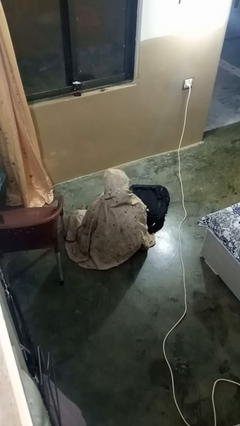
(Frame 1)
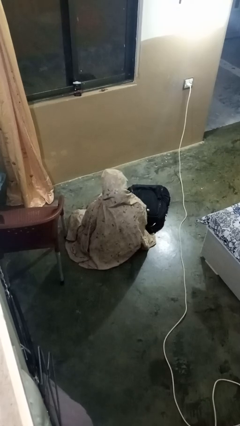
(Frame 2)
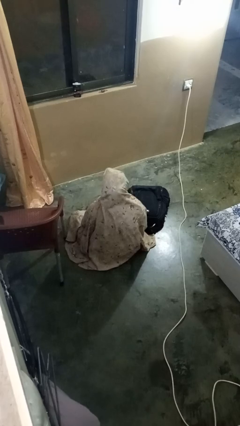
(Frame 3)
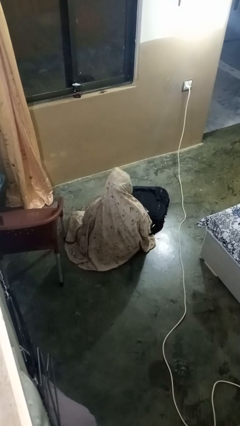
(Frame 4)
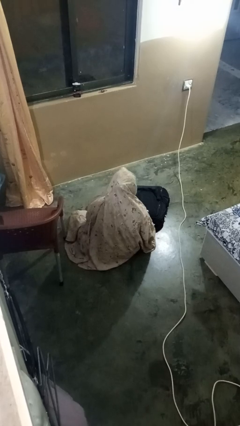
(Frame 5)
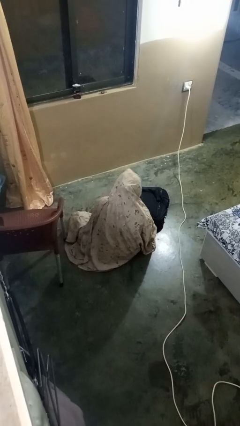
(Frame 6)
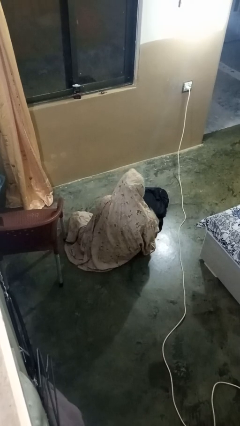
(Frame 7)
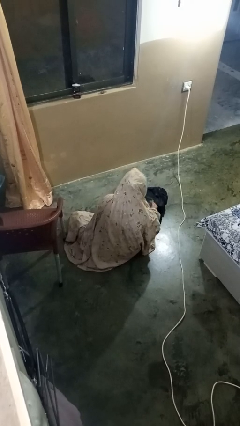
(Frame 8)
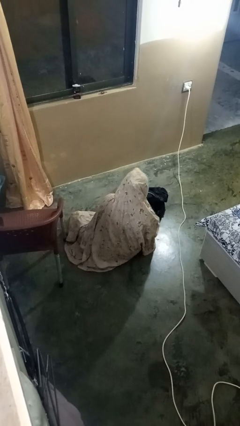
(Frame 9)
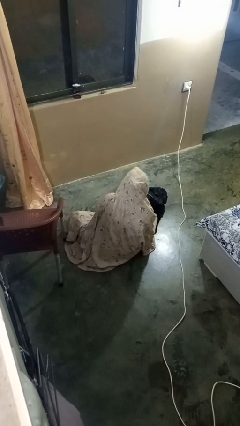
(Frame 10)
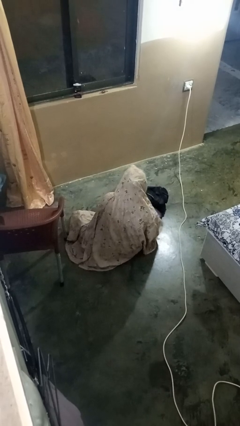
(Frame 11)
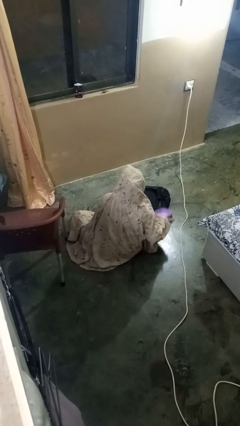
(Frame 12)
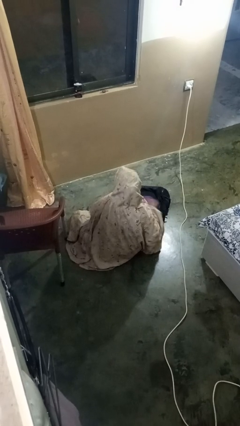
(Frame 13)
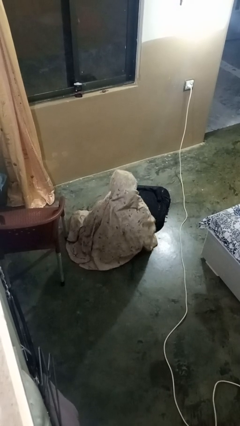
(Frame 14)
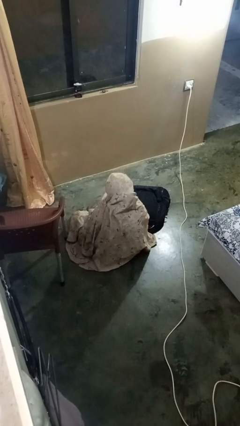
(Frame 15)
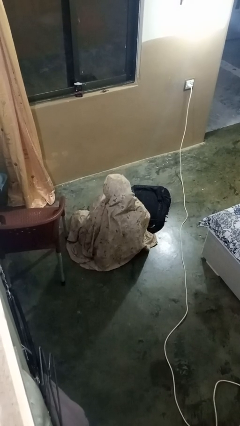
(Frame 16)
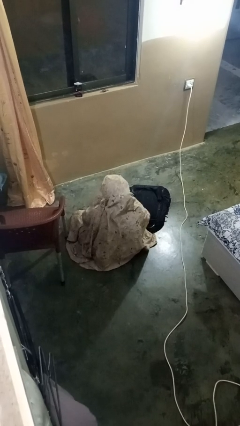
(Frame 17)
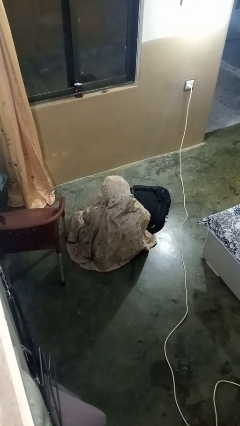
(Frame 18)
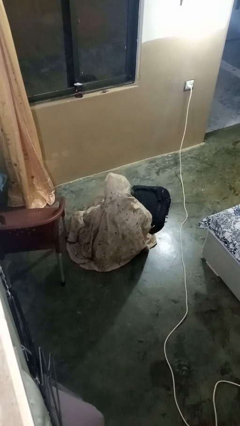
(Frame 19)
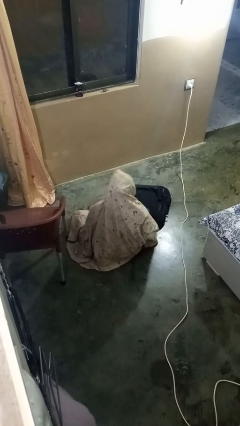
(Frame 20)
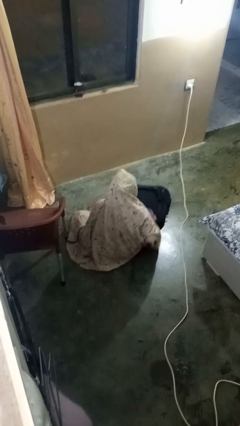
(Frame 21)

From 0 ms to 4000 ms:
person eats snack from bag

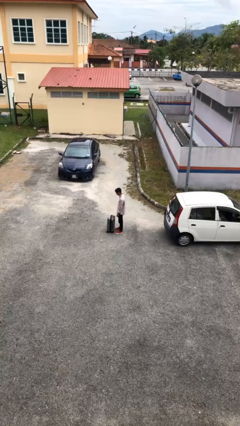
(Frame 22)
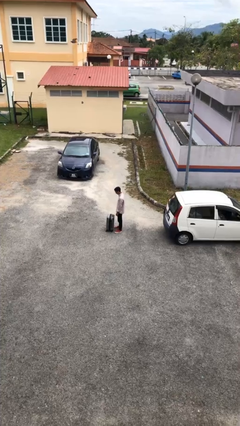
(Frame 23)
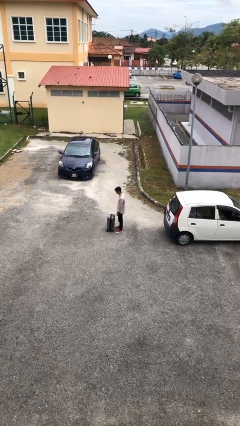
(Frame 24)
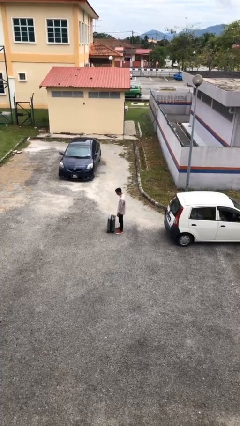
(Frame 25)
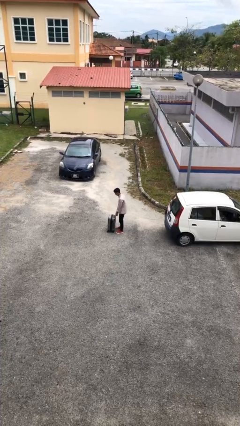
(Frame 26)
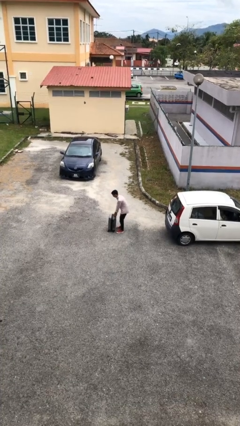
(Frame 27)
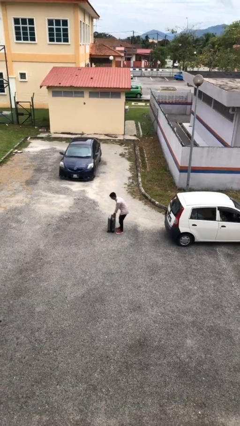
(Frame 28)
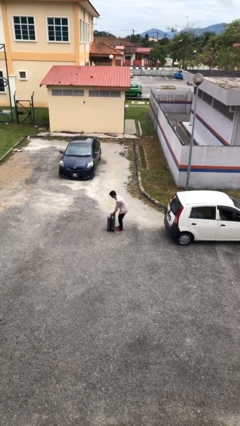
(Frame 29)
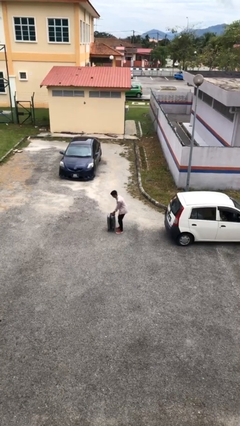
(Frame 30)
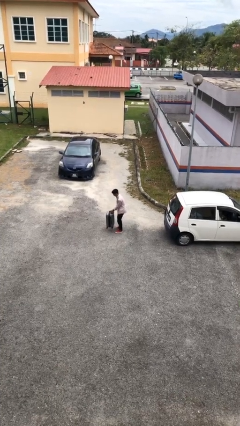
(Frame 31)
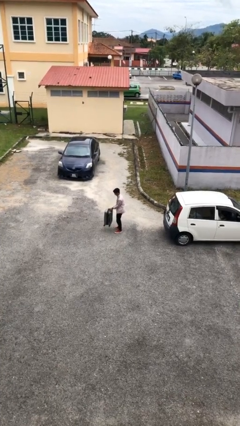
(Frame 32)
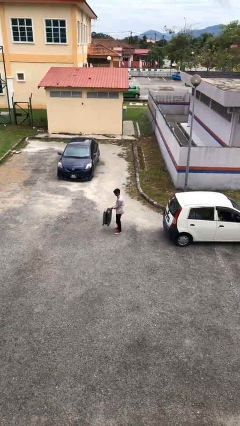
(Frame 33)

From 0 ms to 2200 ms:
person picks up object from floor

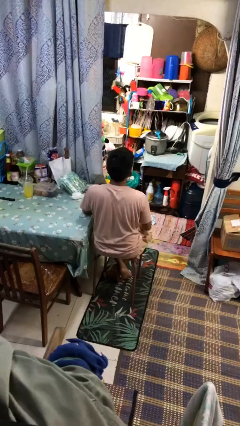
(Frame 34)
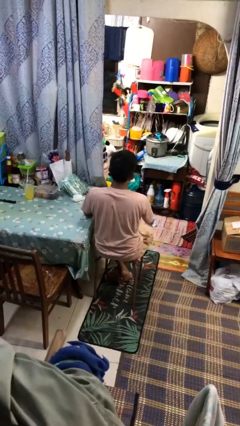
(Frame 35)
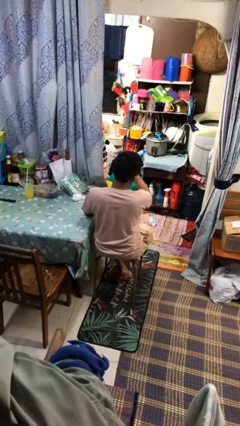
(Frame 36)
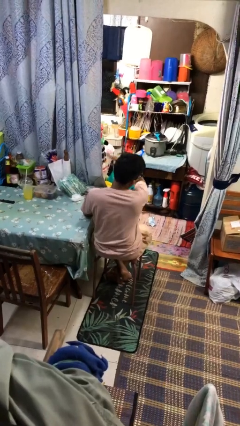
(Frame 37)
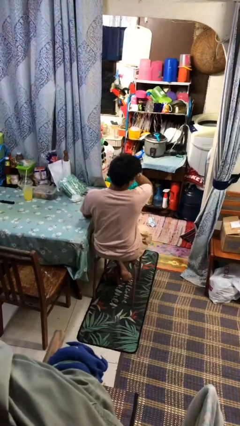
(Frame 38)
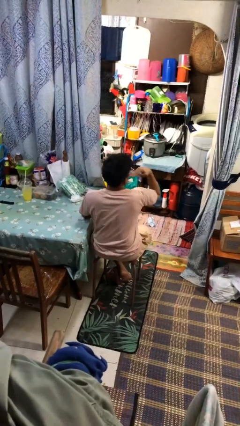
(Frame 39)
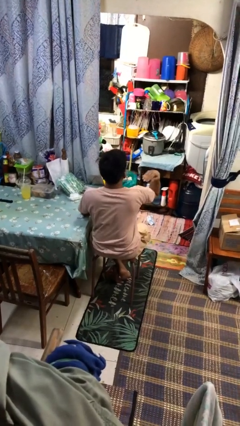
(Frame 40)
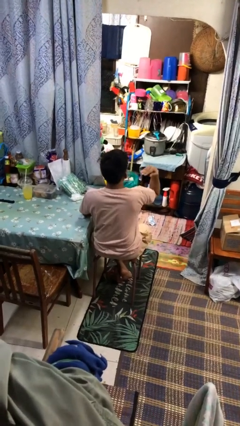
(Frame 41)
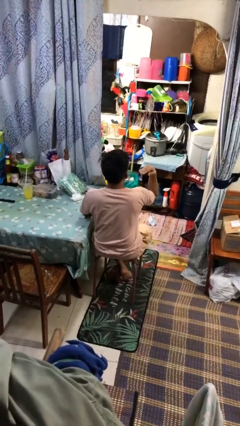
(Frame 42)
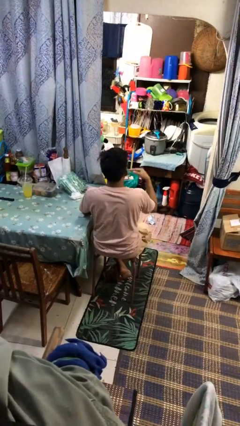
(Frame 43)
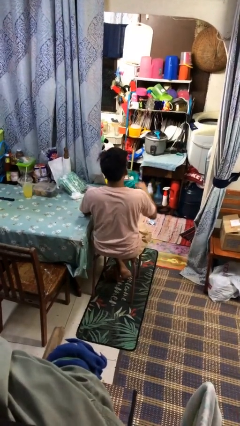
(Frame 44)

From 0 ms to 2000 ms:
person gestures cut

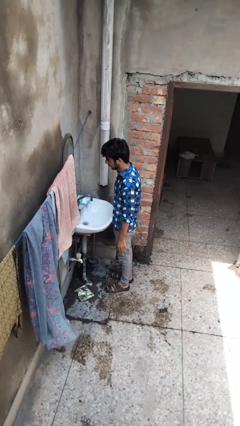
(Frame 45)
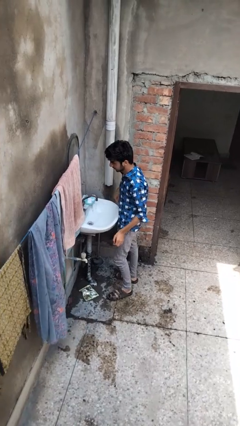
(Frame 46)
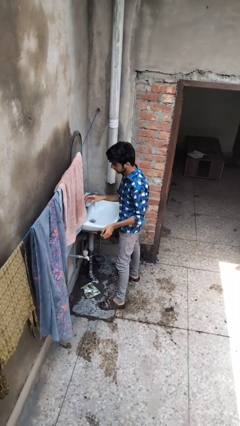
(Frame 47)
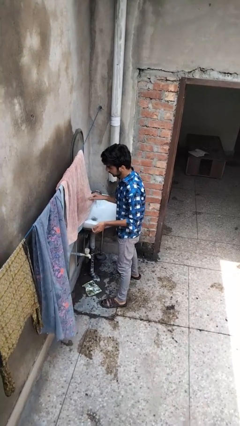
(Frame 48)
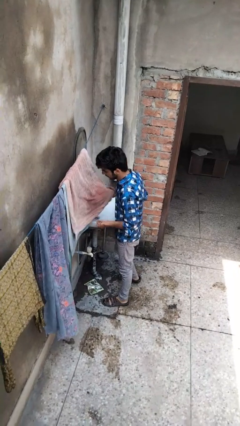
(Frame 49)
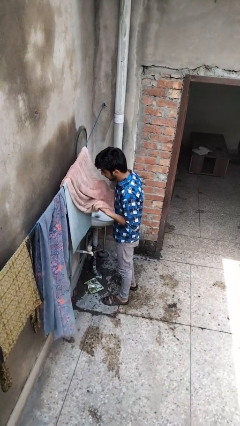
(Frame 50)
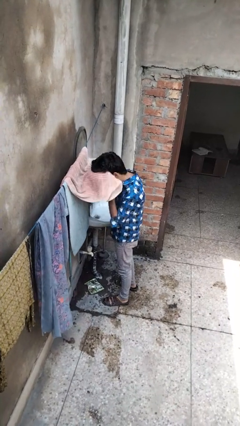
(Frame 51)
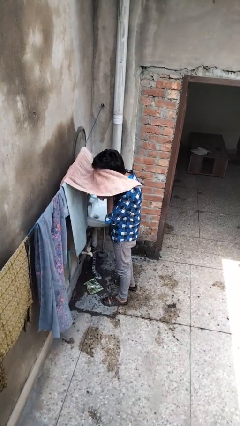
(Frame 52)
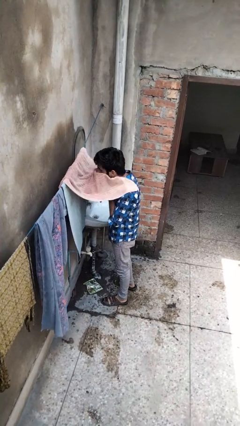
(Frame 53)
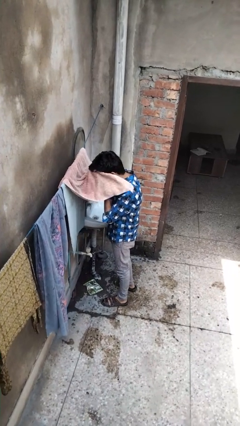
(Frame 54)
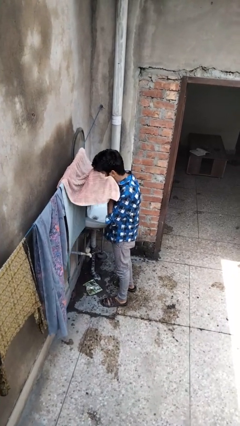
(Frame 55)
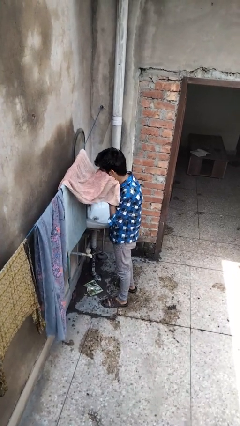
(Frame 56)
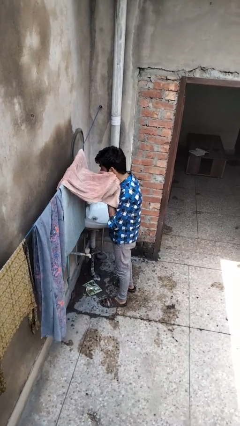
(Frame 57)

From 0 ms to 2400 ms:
person dries face with towel

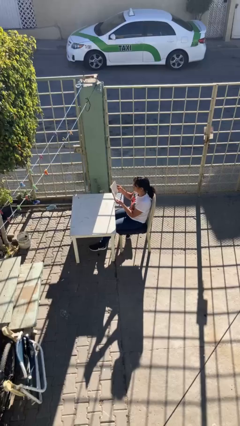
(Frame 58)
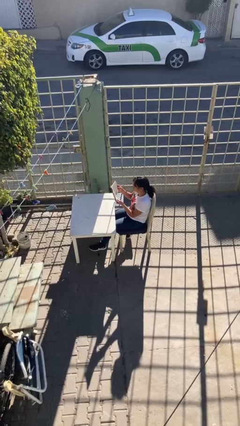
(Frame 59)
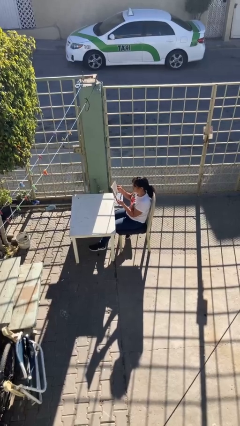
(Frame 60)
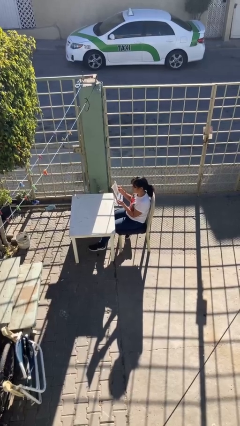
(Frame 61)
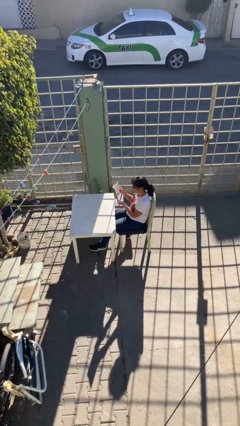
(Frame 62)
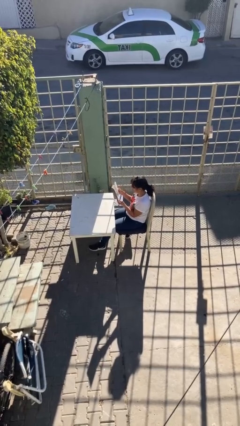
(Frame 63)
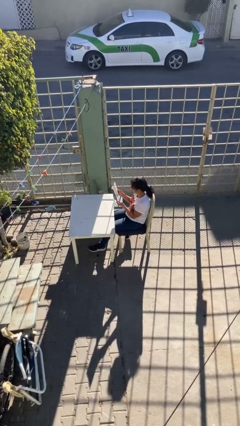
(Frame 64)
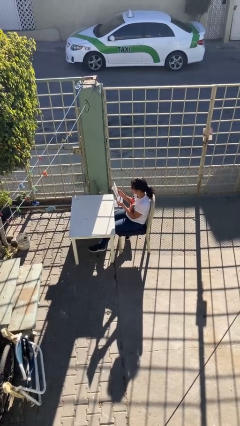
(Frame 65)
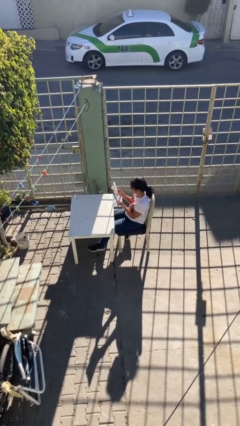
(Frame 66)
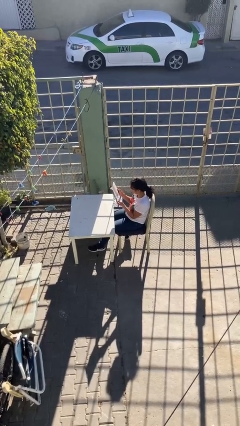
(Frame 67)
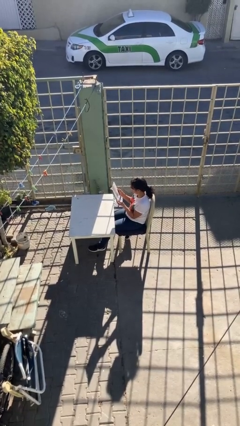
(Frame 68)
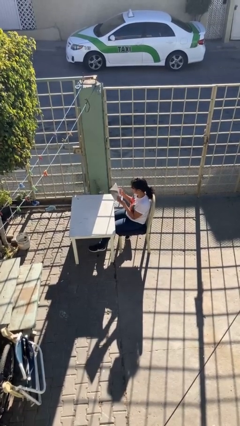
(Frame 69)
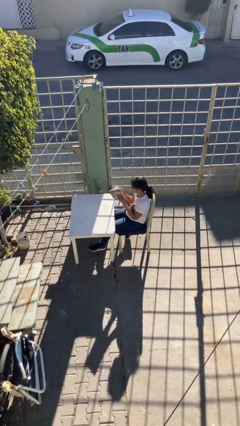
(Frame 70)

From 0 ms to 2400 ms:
person reads document

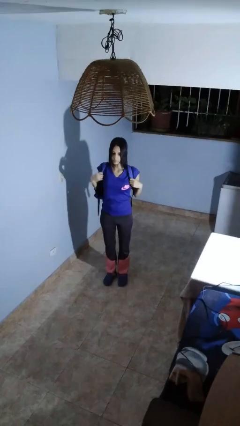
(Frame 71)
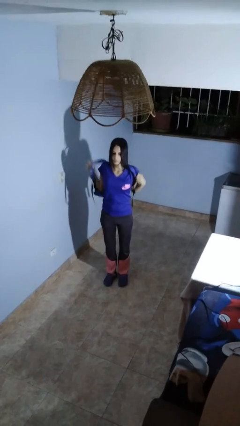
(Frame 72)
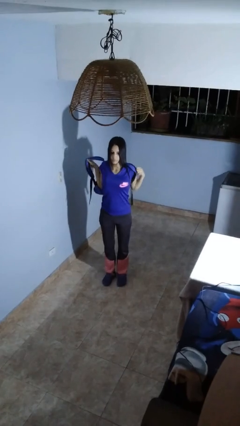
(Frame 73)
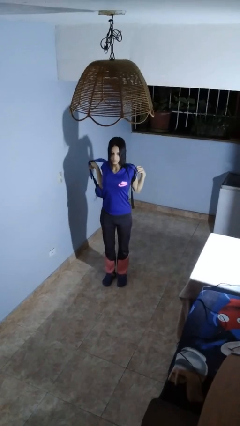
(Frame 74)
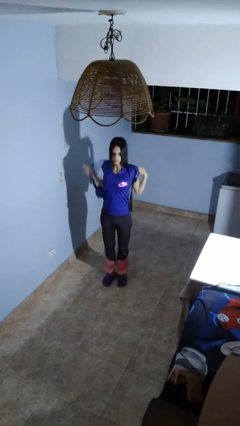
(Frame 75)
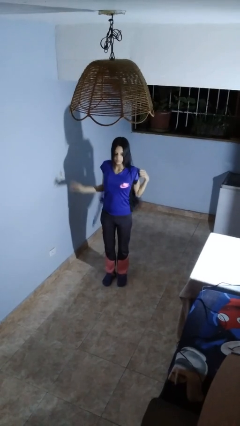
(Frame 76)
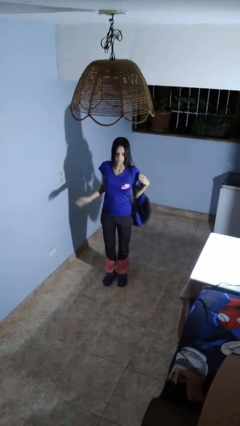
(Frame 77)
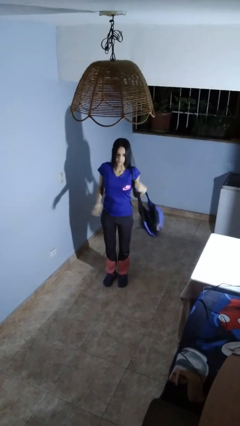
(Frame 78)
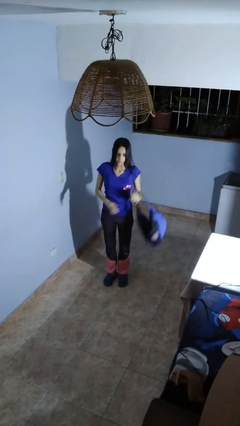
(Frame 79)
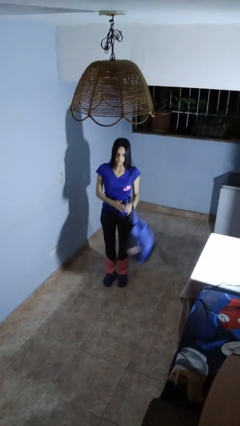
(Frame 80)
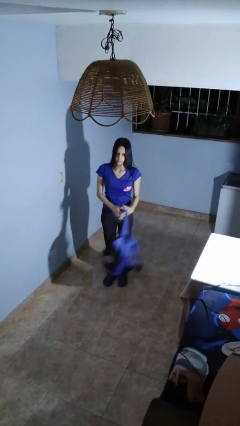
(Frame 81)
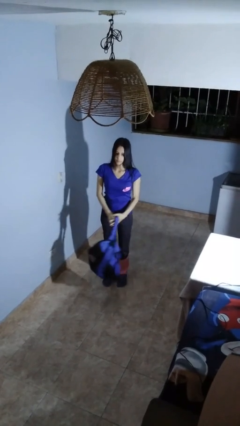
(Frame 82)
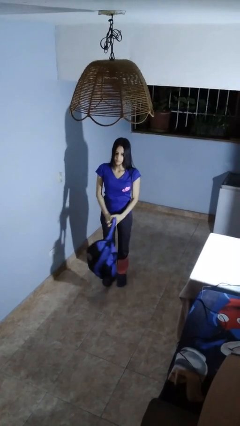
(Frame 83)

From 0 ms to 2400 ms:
person takes off backpack

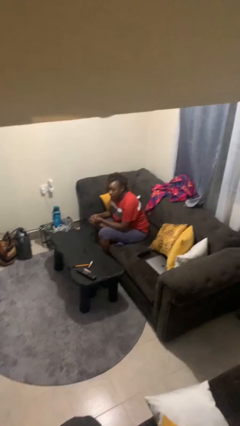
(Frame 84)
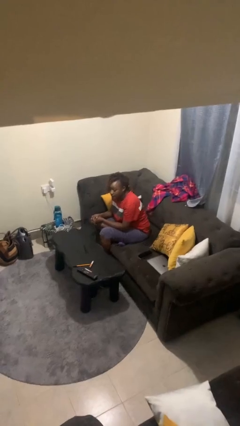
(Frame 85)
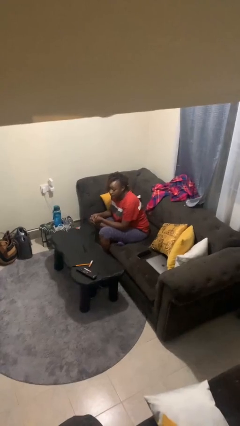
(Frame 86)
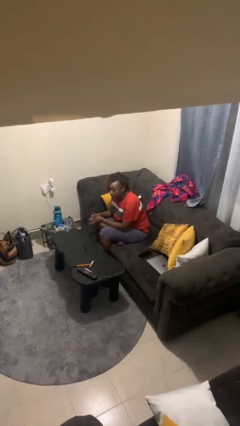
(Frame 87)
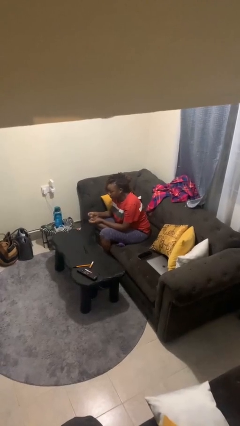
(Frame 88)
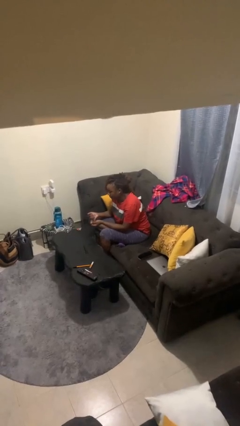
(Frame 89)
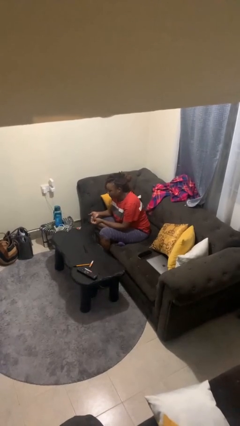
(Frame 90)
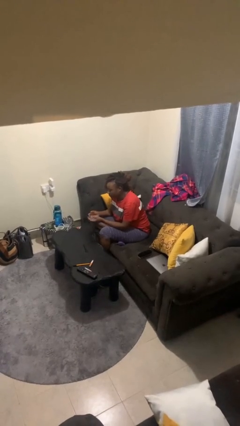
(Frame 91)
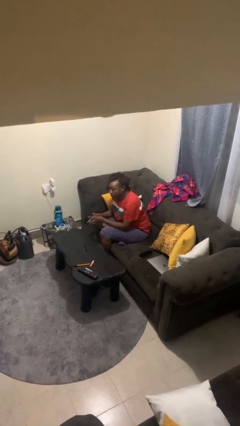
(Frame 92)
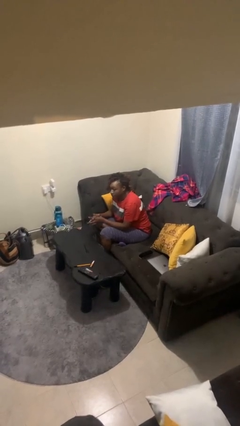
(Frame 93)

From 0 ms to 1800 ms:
person snaps fingers
